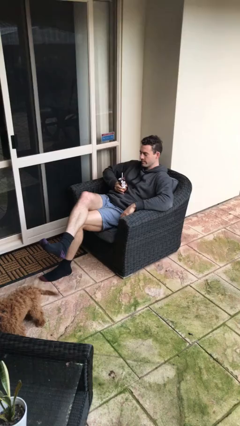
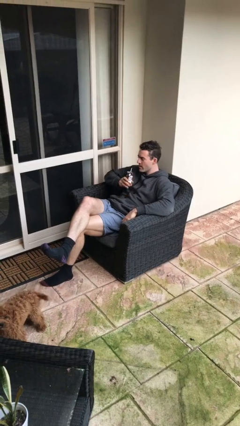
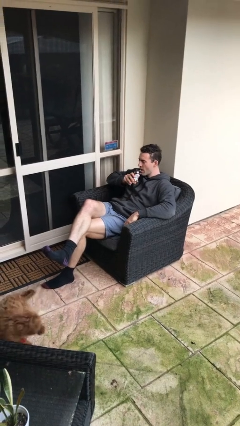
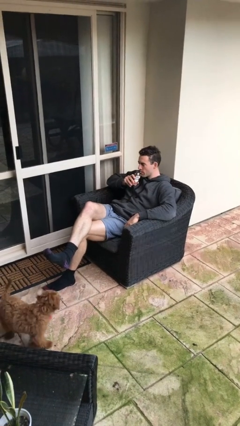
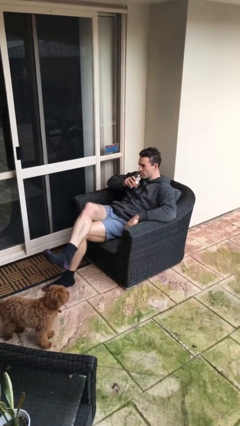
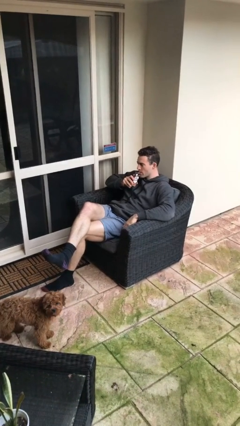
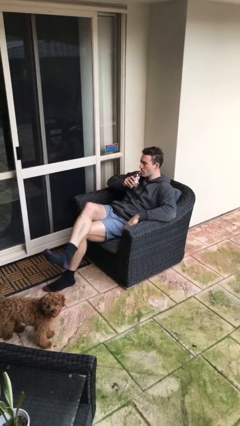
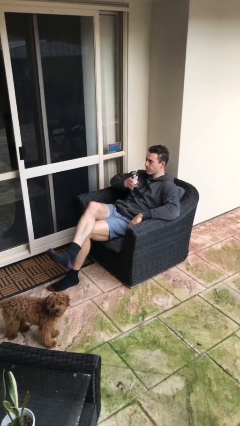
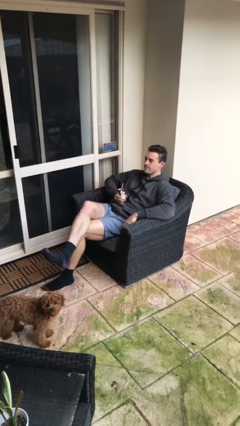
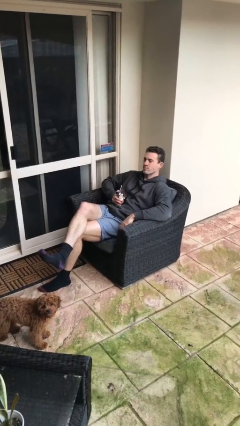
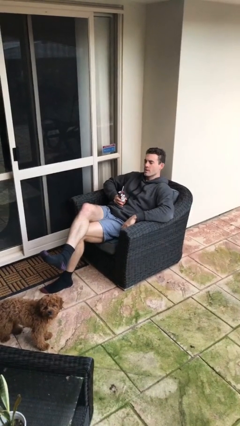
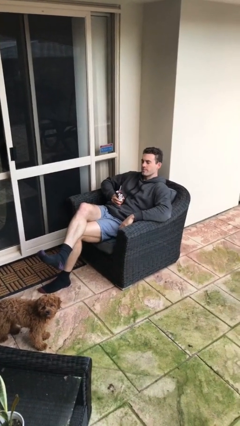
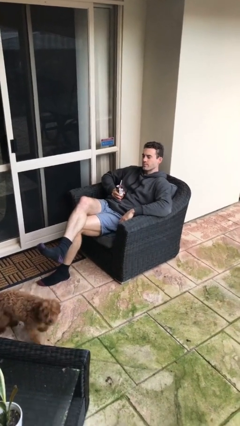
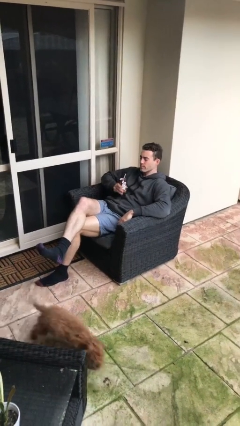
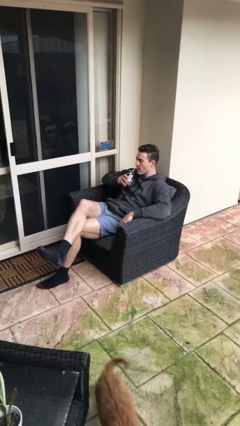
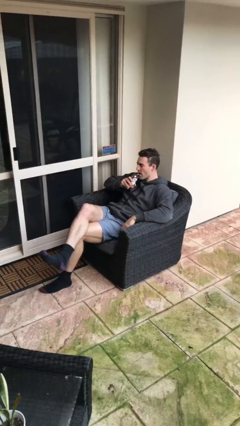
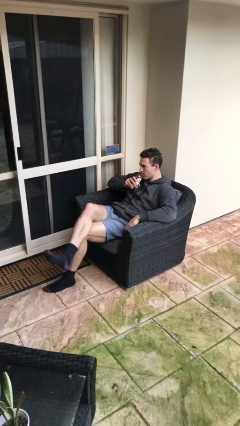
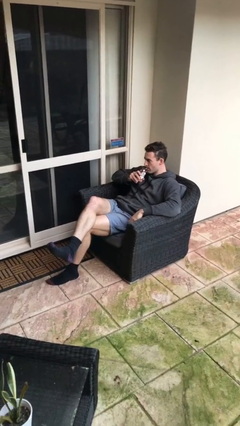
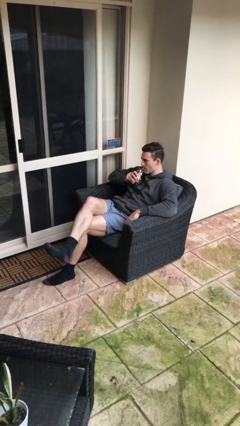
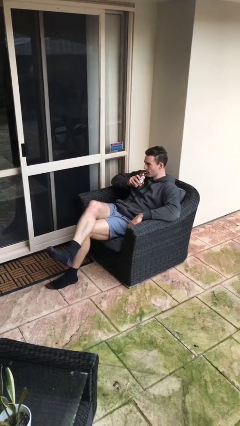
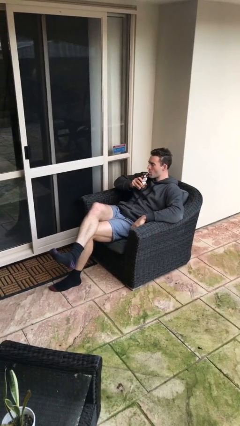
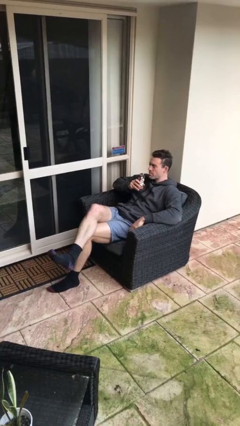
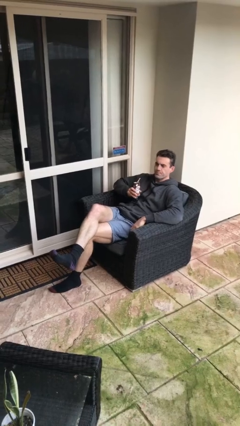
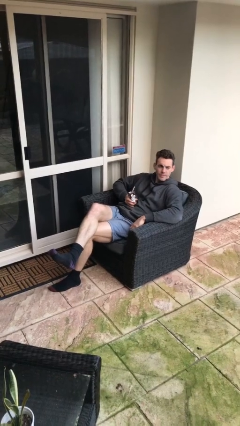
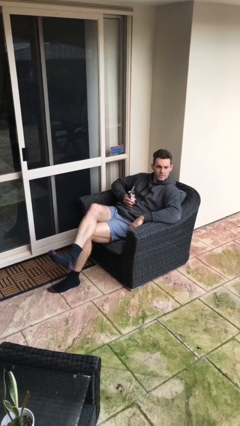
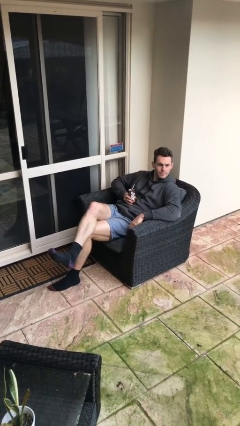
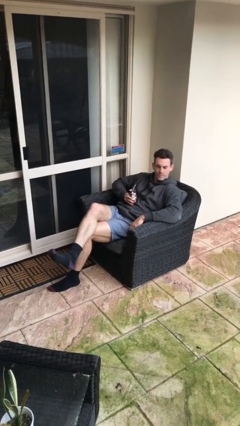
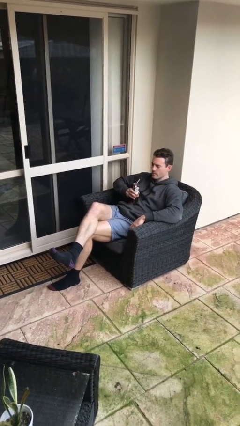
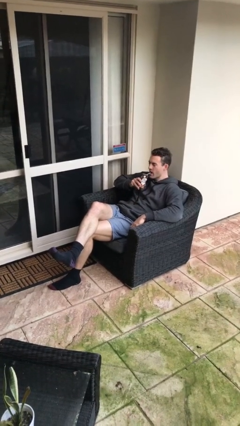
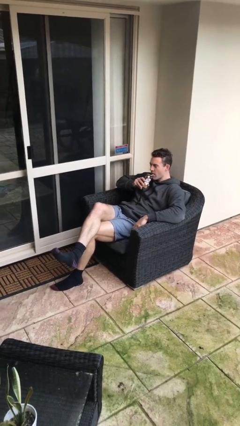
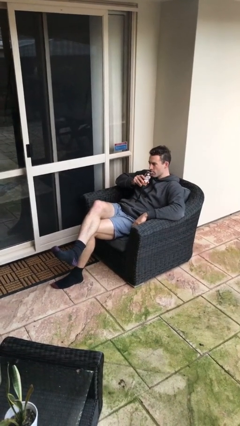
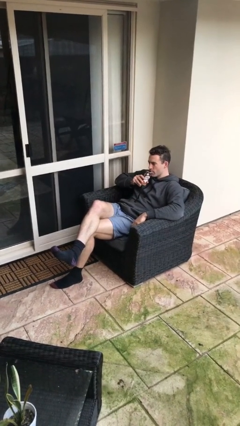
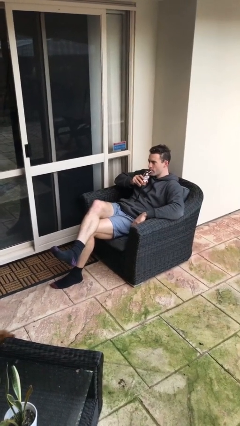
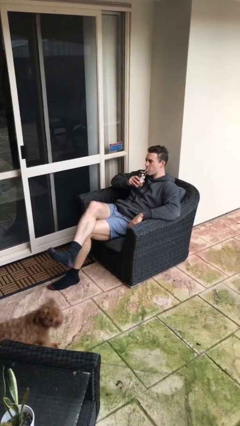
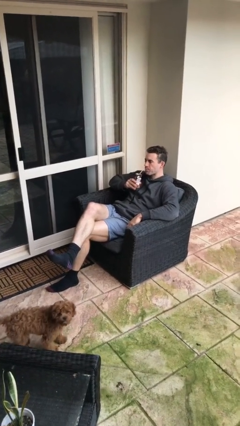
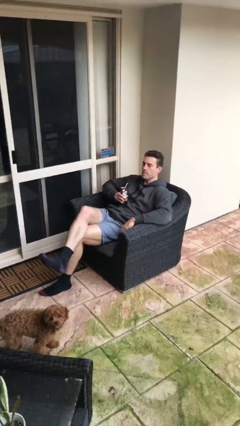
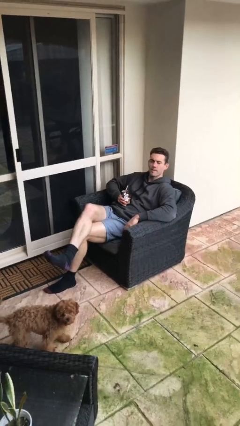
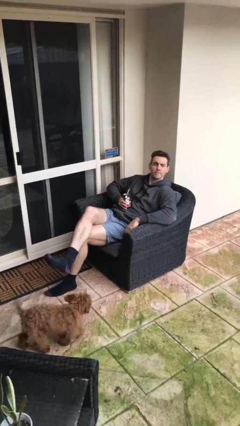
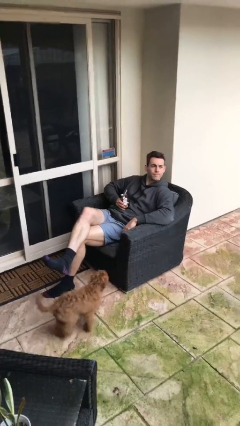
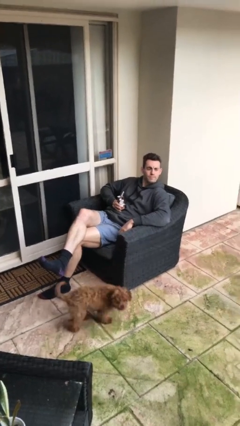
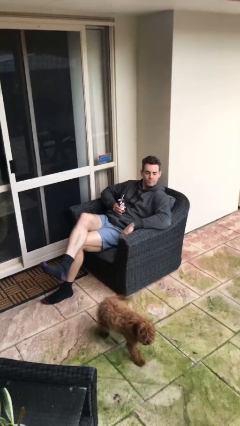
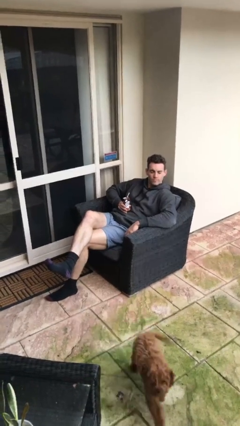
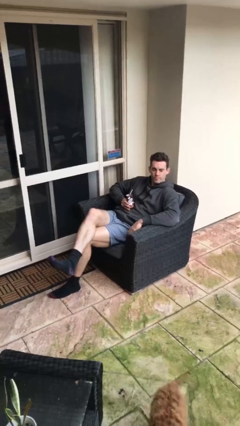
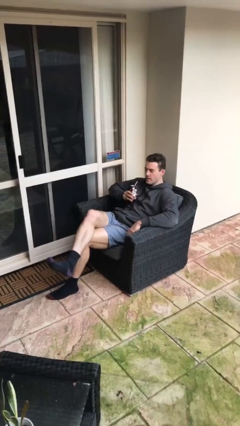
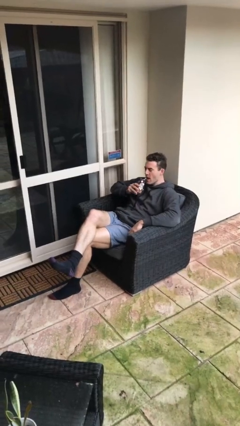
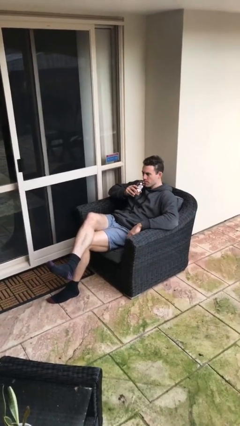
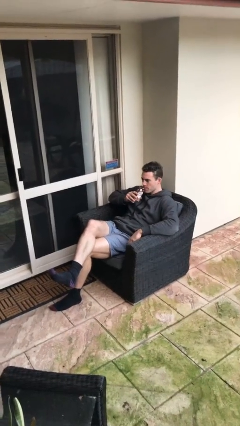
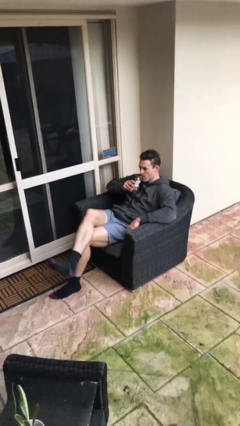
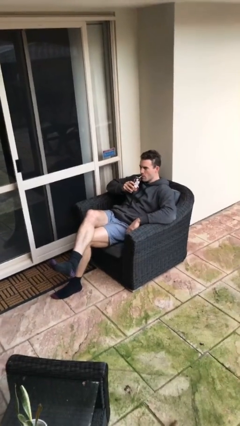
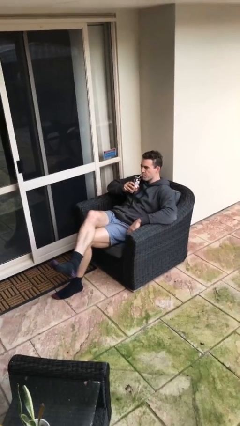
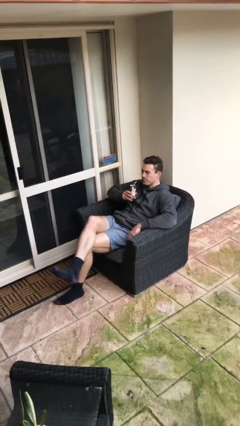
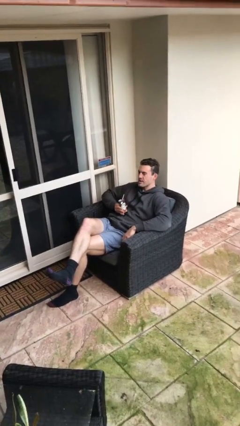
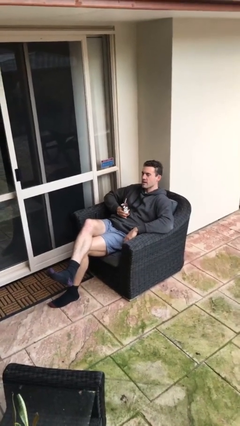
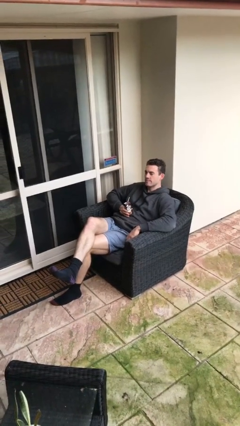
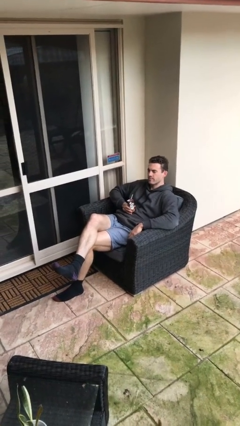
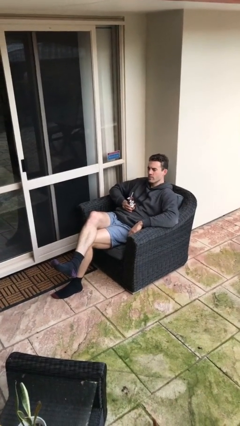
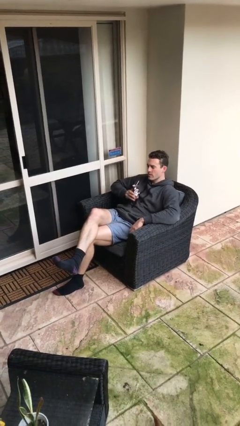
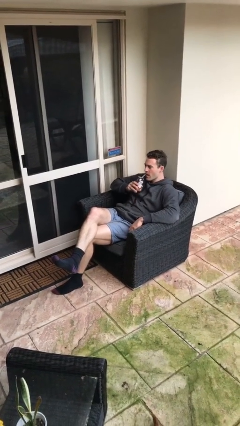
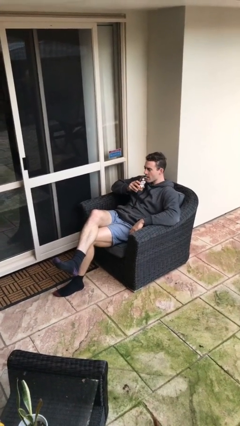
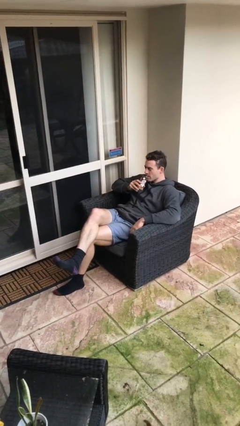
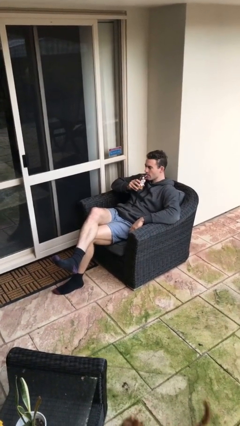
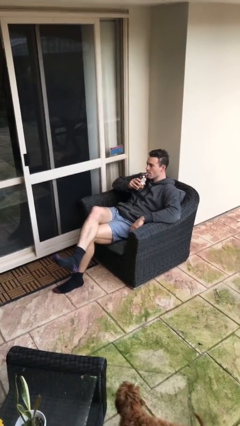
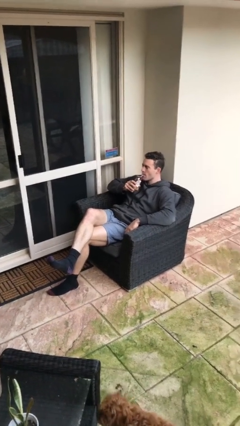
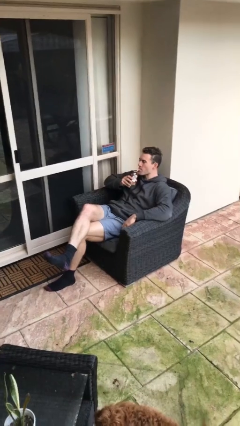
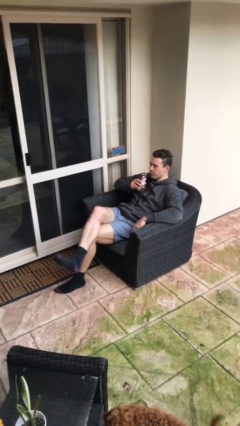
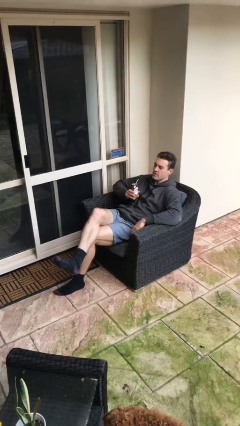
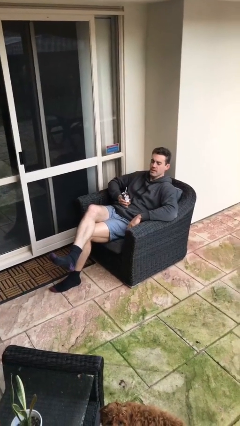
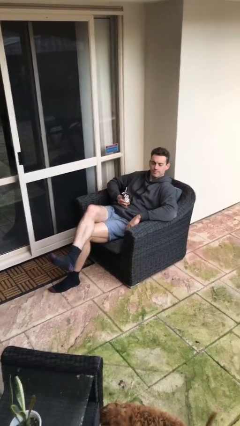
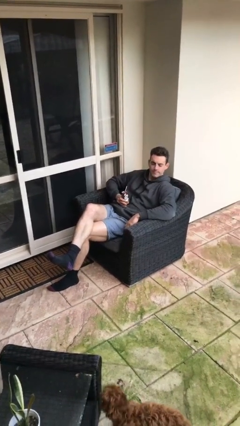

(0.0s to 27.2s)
person drinks from straw

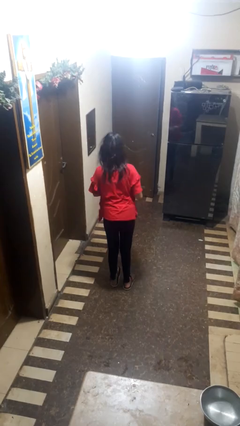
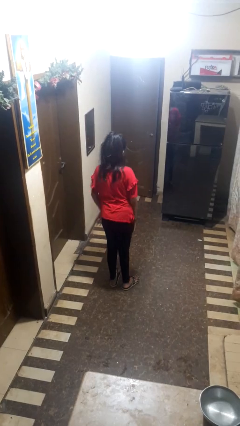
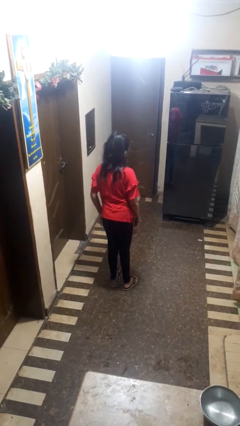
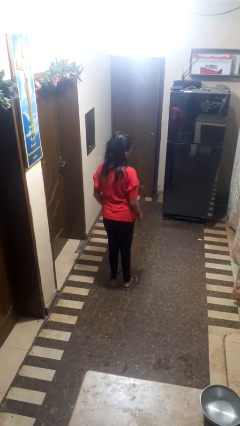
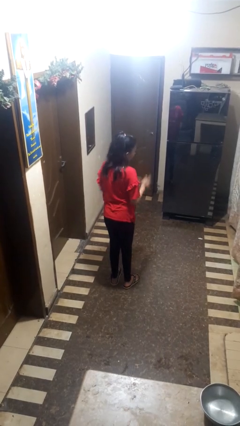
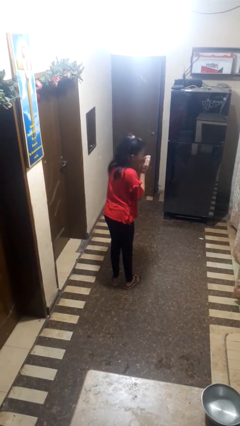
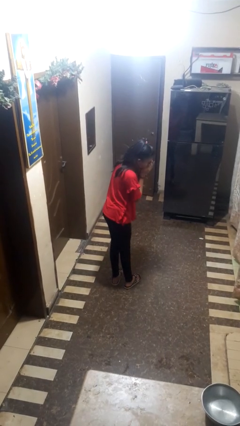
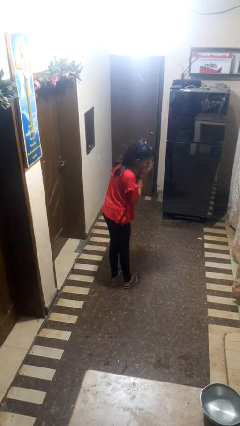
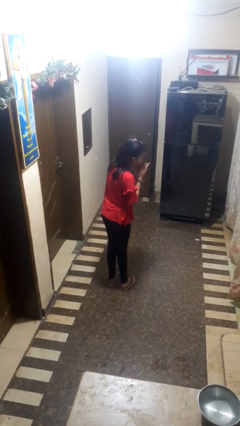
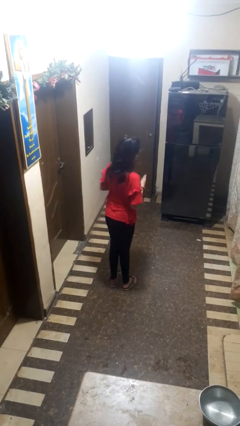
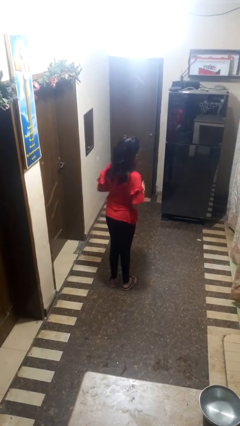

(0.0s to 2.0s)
person sneezes into hand

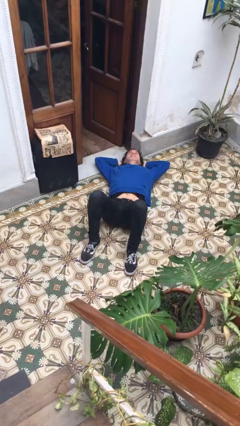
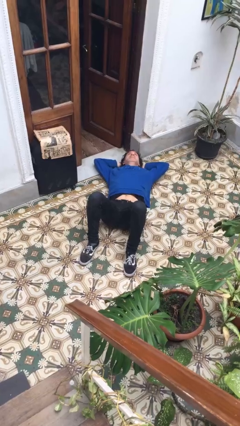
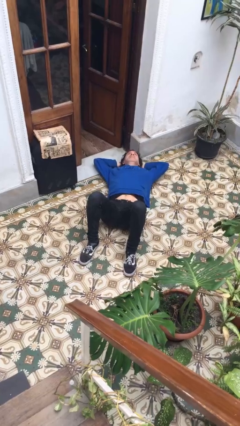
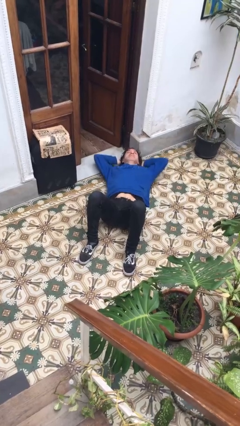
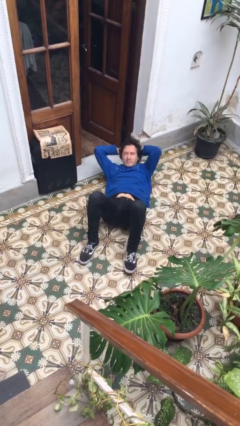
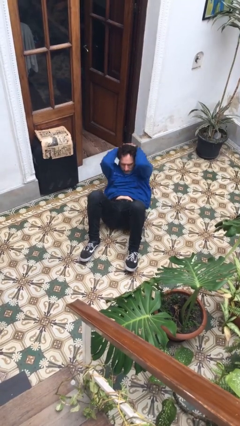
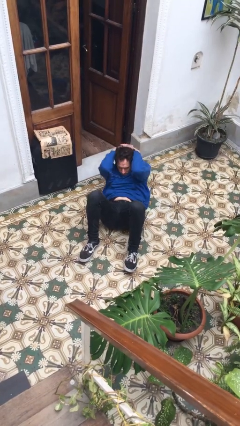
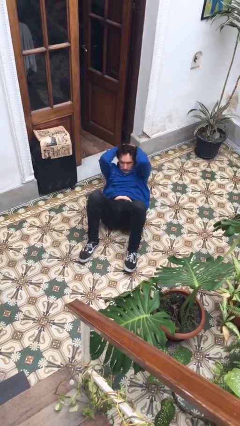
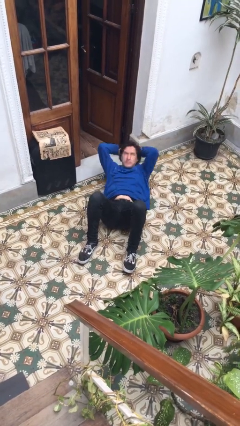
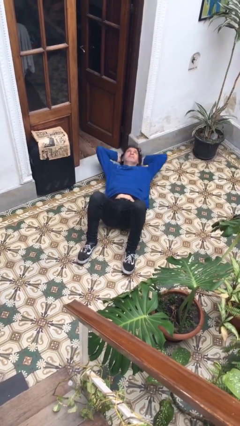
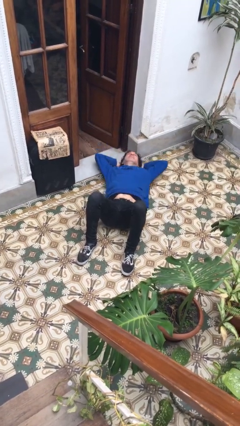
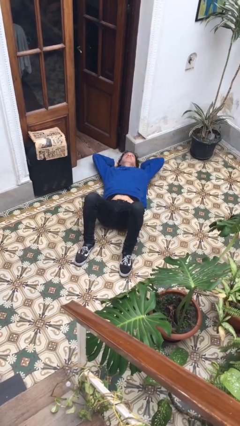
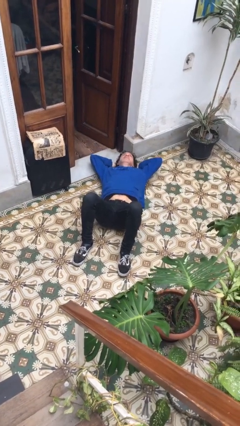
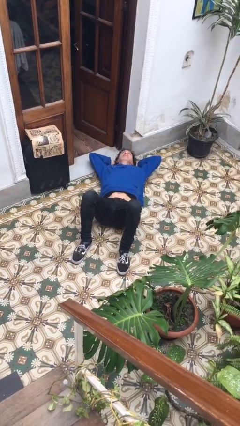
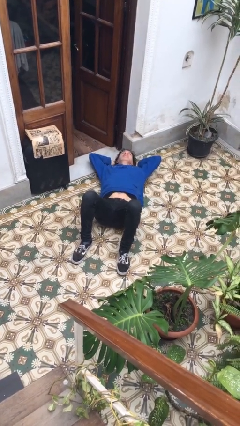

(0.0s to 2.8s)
person exercises with situp
